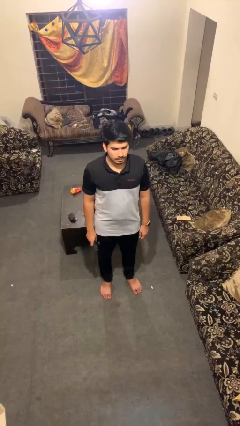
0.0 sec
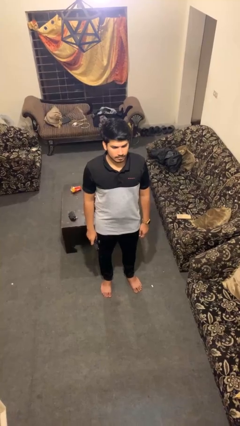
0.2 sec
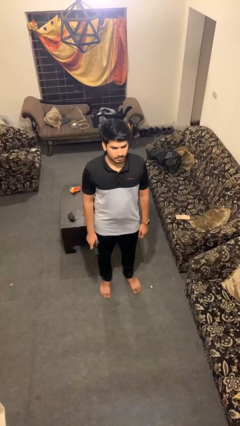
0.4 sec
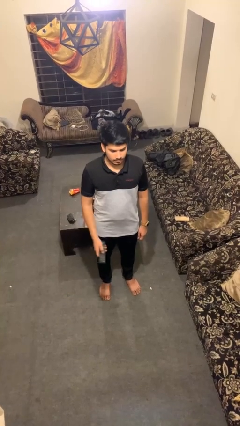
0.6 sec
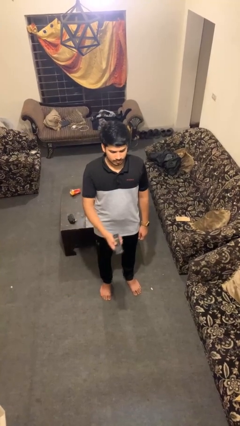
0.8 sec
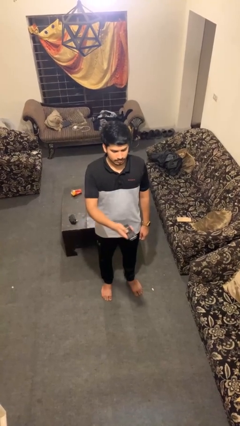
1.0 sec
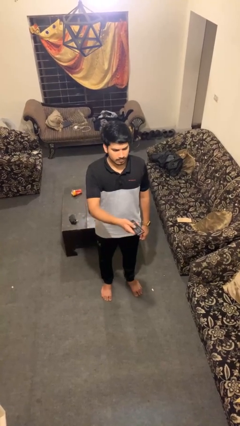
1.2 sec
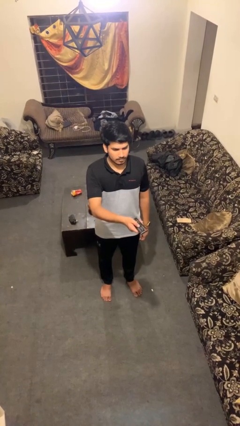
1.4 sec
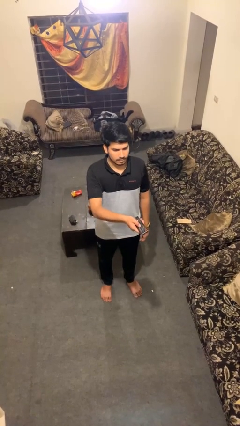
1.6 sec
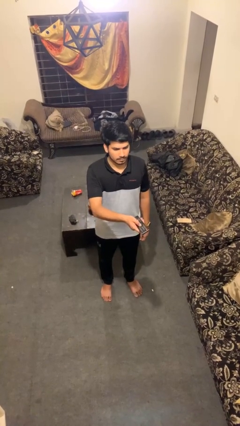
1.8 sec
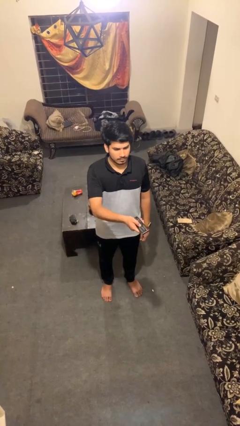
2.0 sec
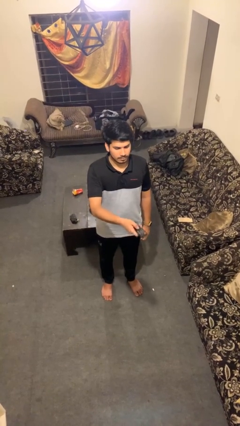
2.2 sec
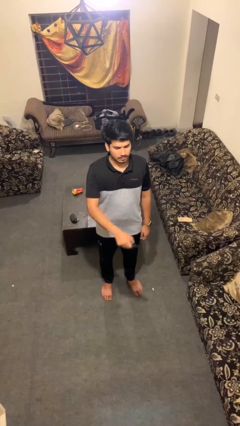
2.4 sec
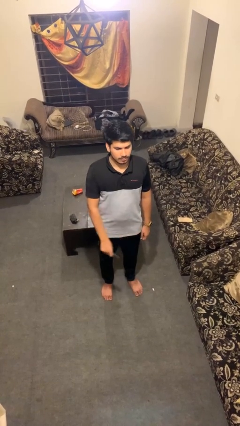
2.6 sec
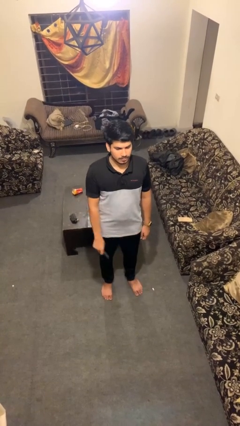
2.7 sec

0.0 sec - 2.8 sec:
person uses television remote

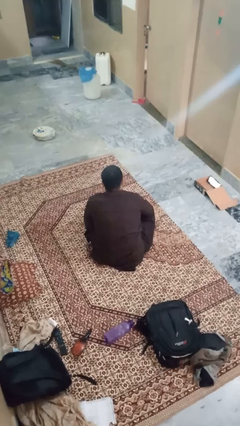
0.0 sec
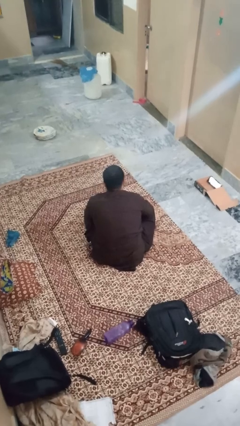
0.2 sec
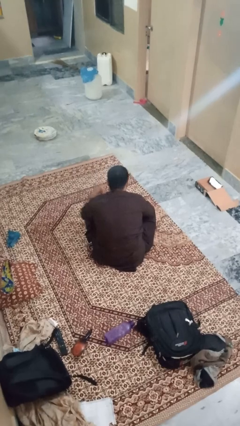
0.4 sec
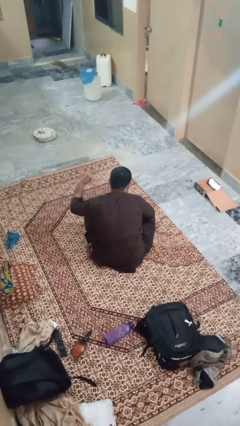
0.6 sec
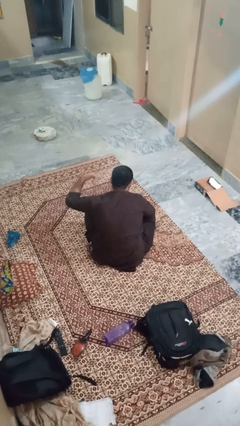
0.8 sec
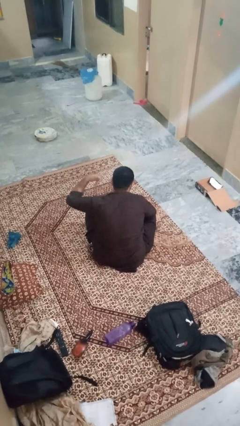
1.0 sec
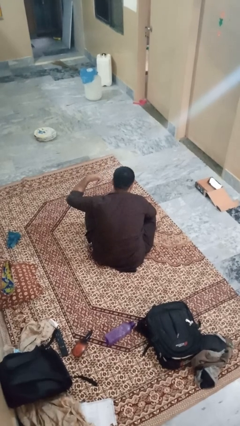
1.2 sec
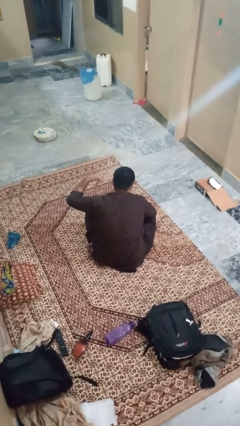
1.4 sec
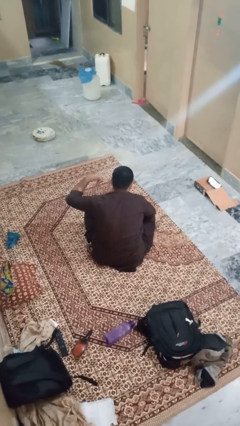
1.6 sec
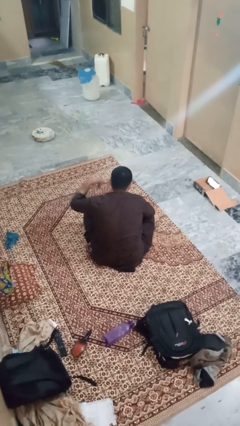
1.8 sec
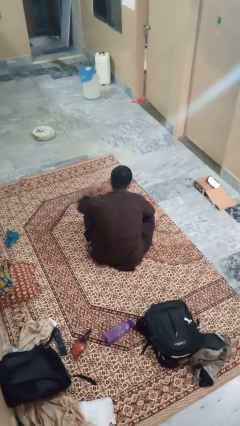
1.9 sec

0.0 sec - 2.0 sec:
person gestures call me

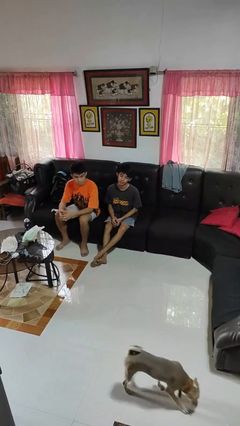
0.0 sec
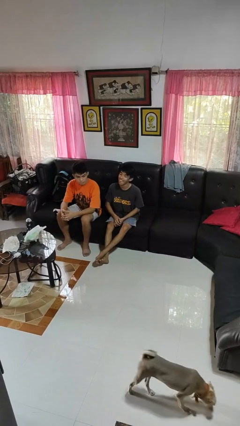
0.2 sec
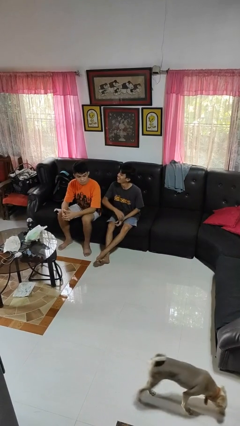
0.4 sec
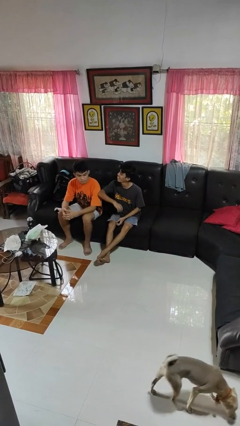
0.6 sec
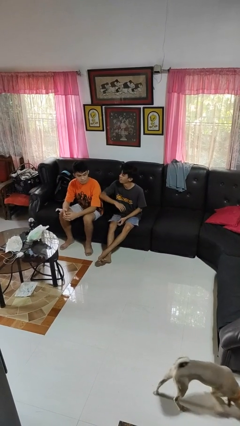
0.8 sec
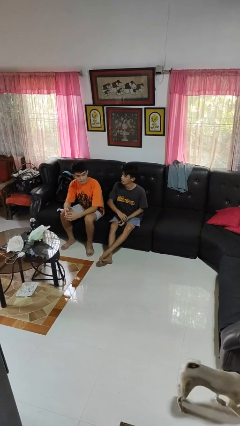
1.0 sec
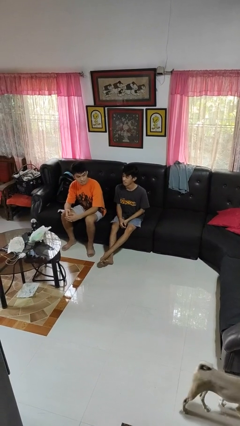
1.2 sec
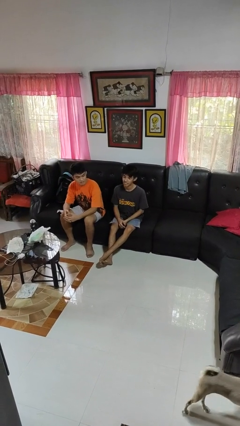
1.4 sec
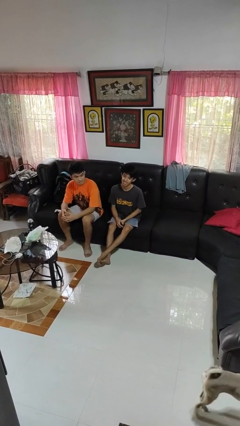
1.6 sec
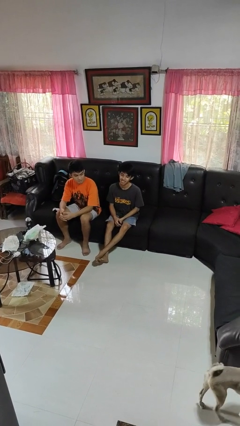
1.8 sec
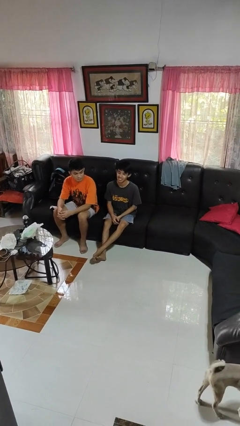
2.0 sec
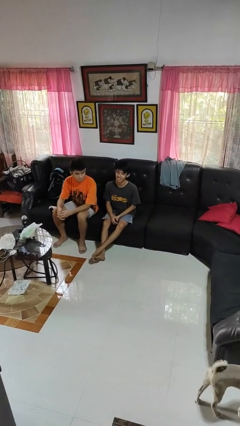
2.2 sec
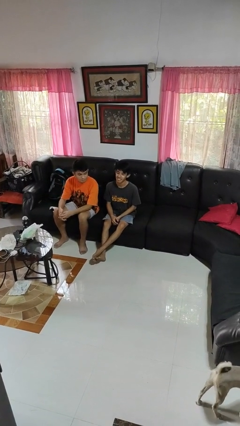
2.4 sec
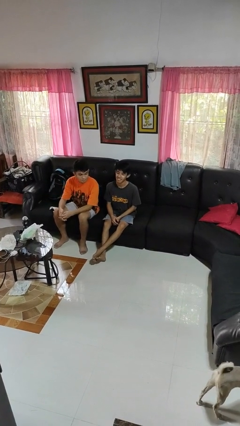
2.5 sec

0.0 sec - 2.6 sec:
person nudges person with elbow

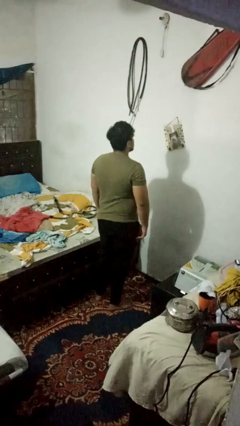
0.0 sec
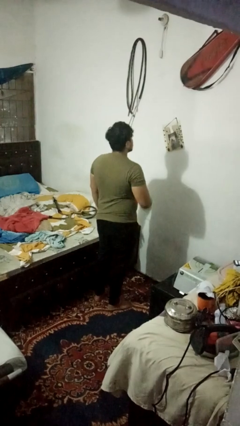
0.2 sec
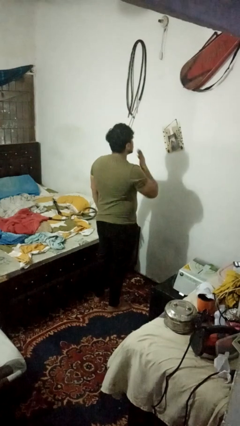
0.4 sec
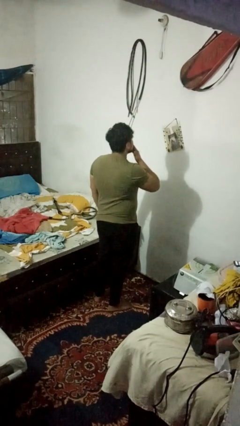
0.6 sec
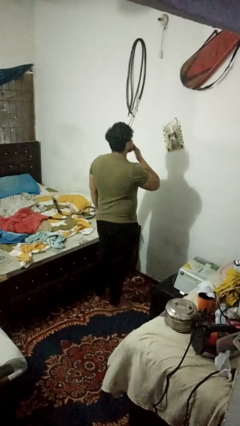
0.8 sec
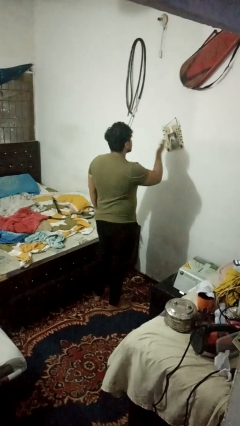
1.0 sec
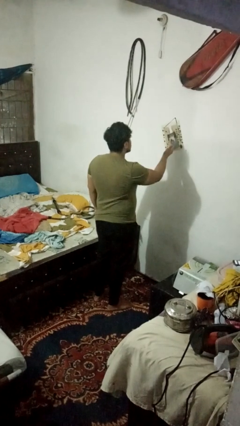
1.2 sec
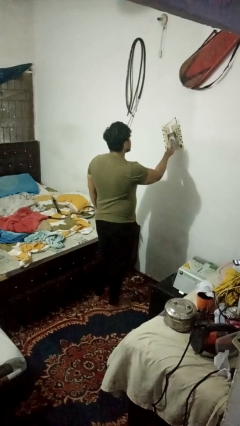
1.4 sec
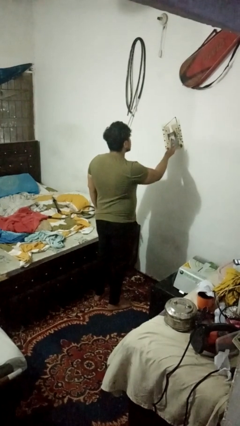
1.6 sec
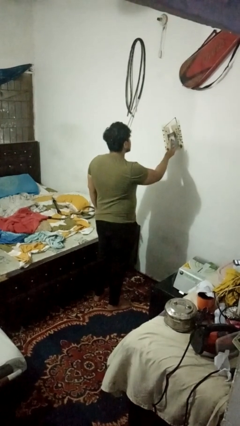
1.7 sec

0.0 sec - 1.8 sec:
person gestures blow kiss

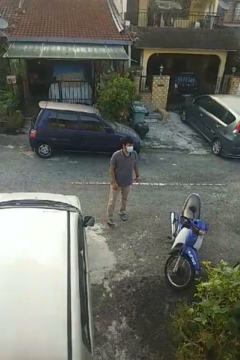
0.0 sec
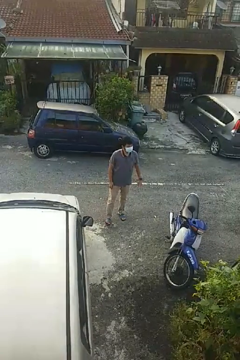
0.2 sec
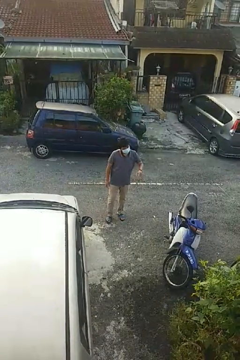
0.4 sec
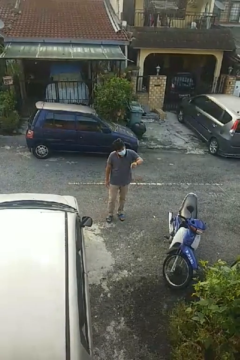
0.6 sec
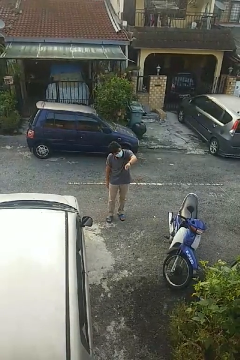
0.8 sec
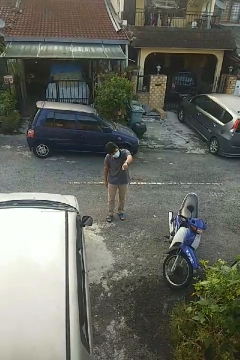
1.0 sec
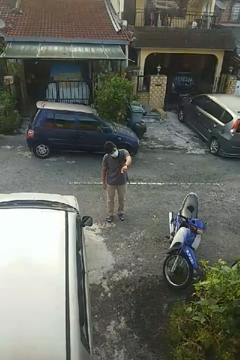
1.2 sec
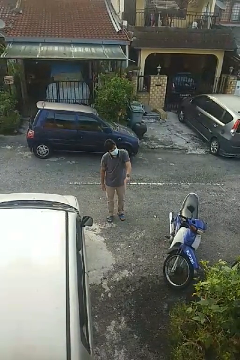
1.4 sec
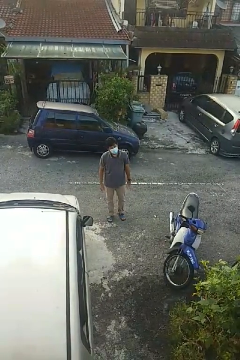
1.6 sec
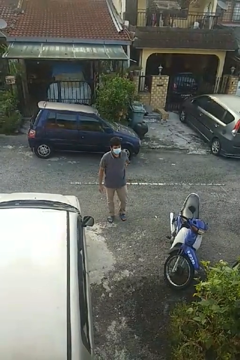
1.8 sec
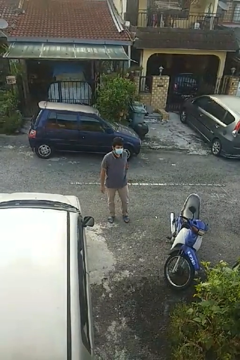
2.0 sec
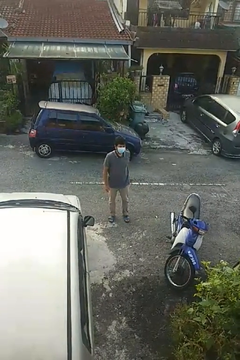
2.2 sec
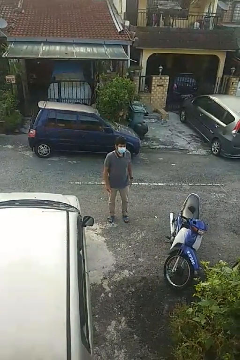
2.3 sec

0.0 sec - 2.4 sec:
person points at person

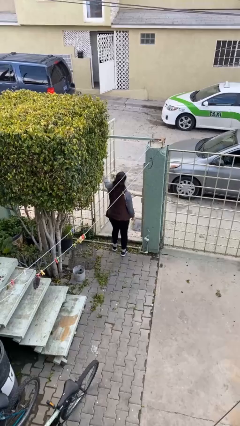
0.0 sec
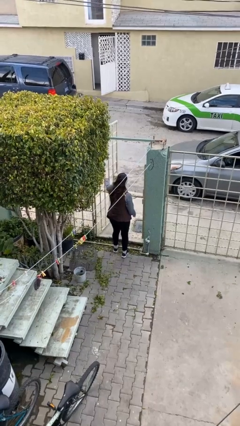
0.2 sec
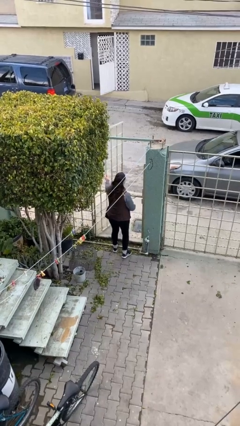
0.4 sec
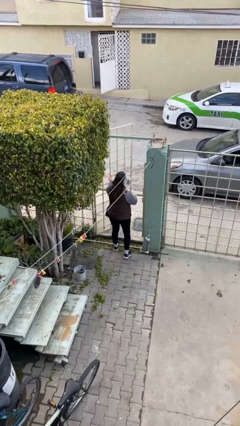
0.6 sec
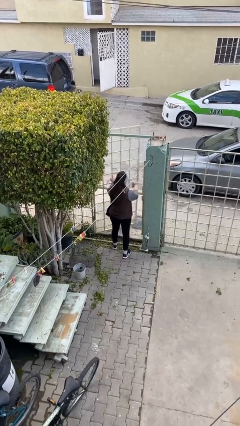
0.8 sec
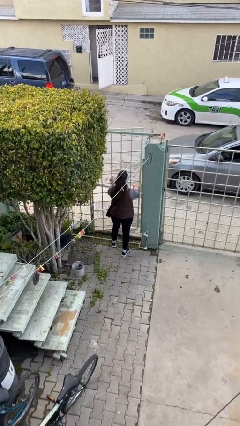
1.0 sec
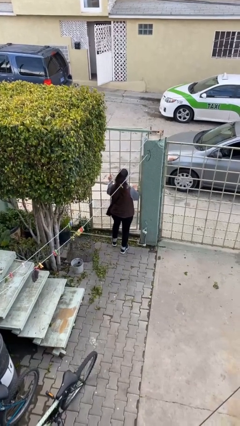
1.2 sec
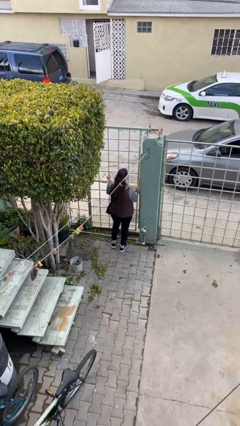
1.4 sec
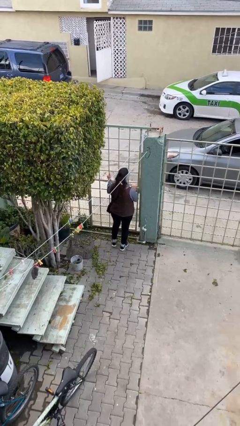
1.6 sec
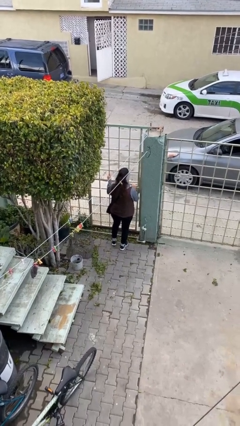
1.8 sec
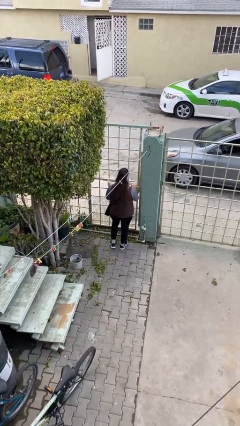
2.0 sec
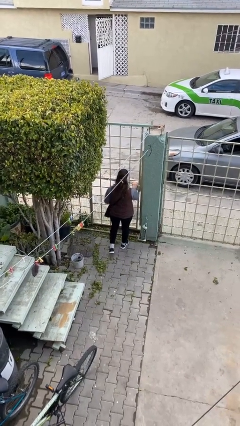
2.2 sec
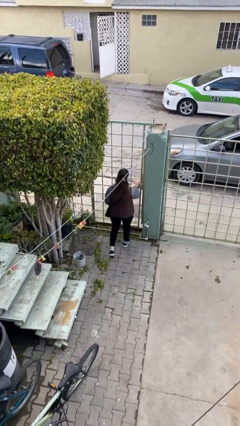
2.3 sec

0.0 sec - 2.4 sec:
person closes facility door

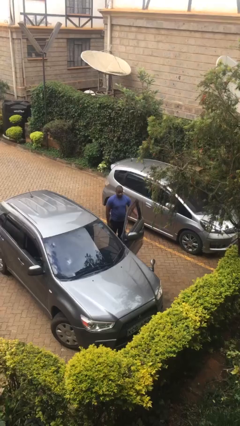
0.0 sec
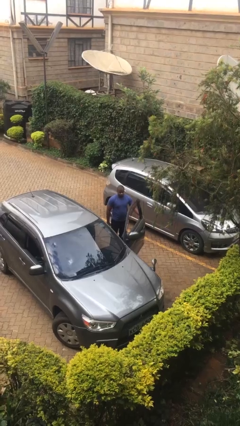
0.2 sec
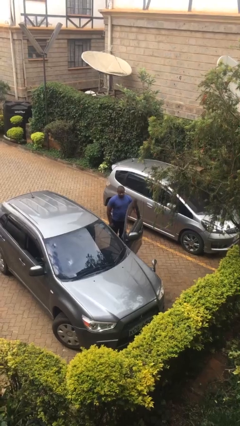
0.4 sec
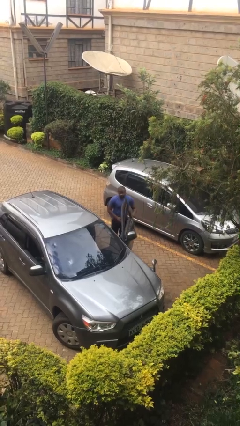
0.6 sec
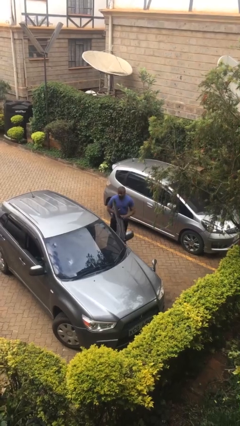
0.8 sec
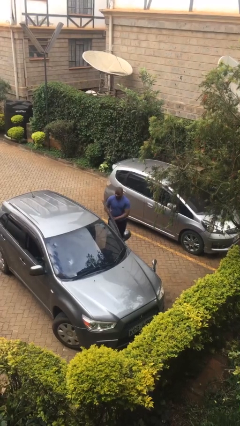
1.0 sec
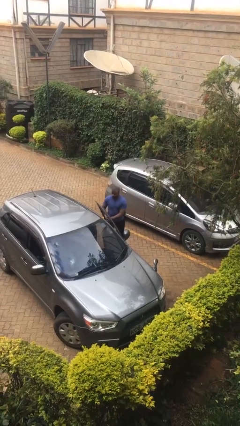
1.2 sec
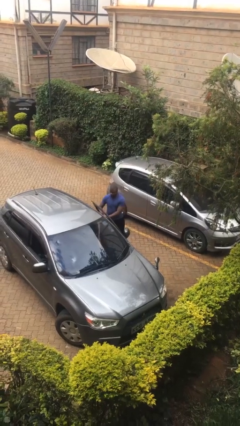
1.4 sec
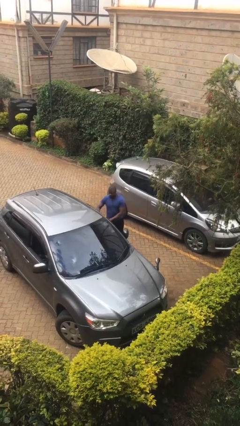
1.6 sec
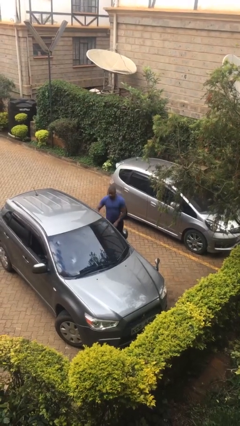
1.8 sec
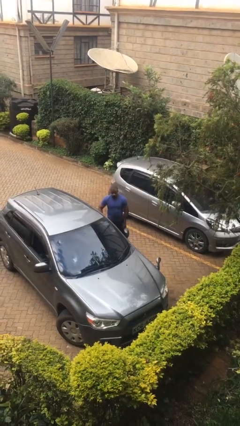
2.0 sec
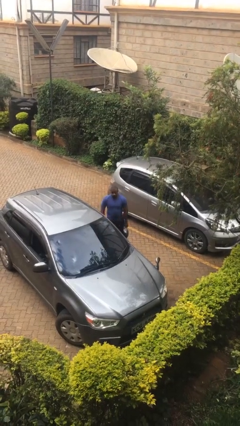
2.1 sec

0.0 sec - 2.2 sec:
person closes car door

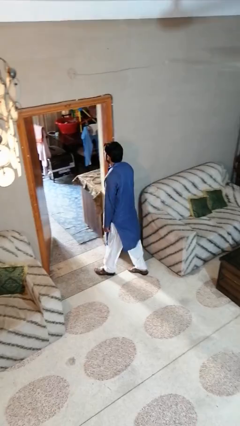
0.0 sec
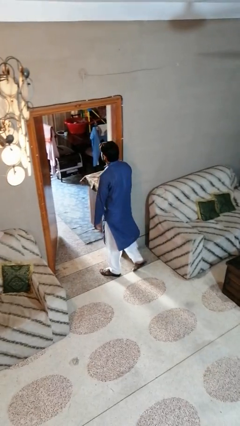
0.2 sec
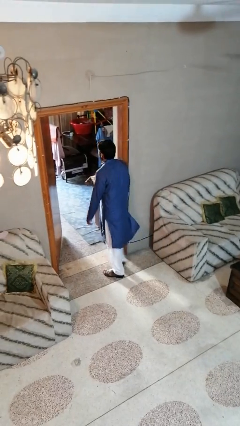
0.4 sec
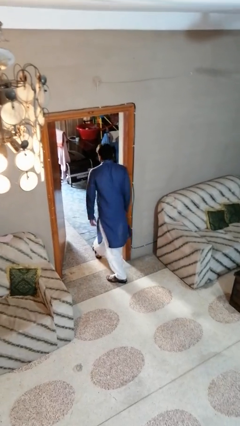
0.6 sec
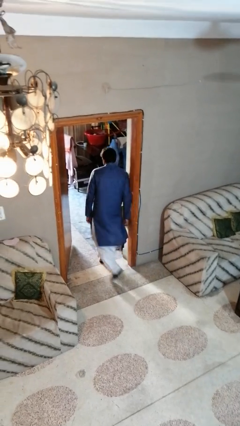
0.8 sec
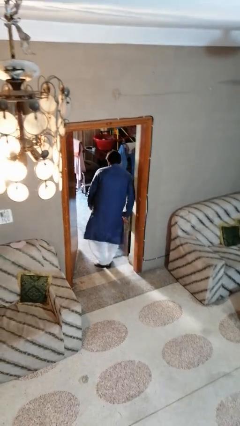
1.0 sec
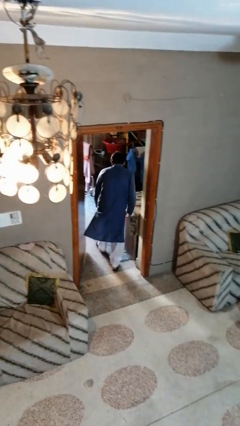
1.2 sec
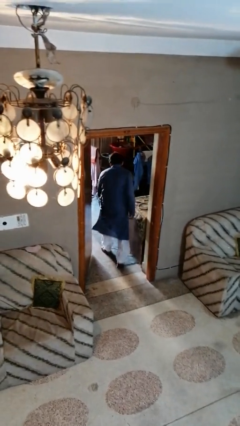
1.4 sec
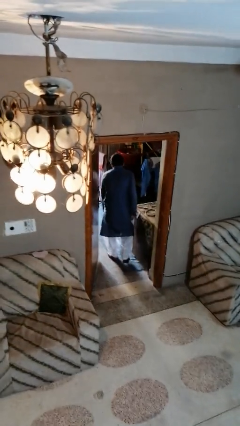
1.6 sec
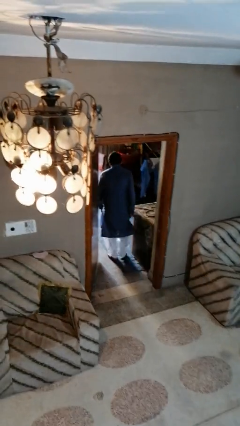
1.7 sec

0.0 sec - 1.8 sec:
person bumps into wall
